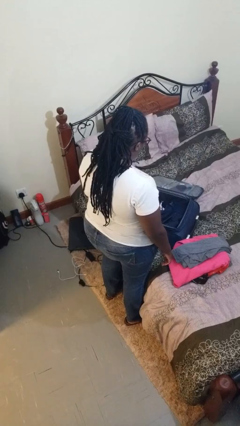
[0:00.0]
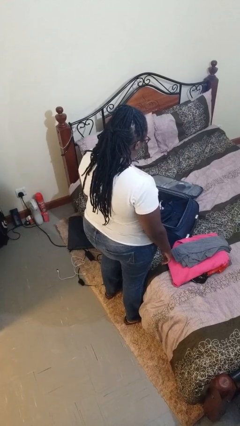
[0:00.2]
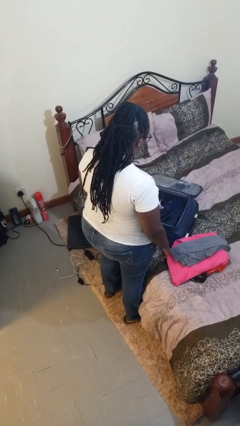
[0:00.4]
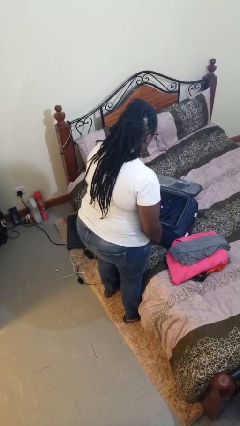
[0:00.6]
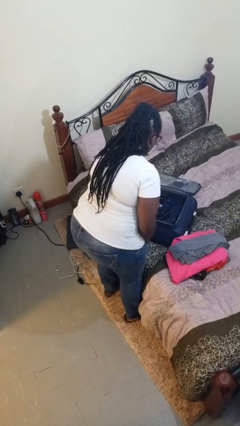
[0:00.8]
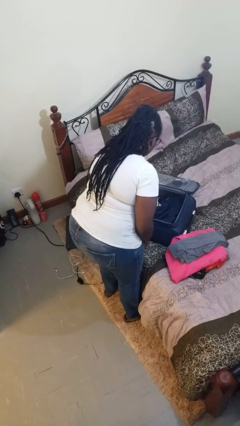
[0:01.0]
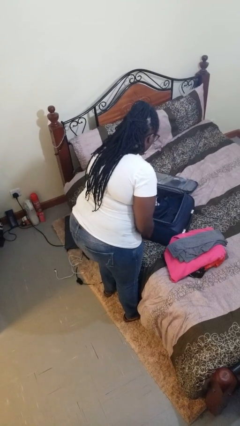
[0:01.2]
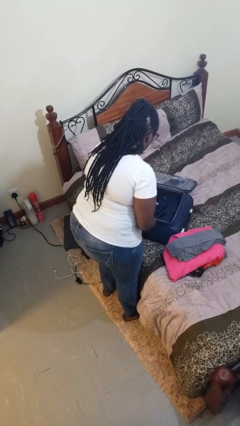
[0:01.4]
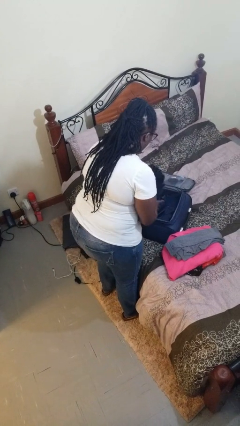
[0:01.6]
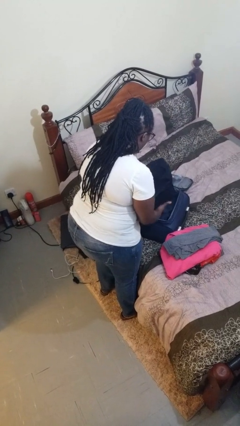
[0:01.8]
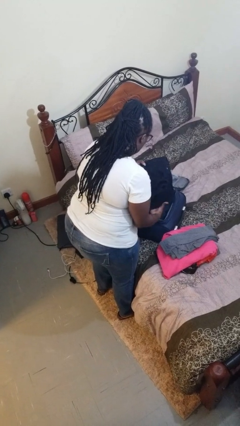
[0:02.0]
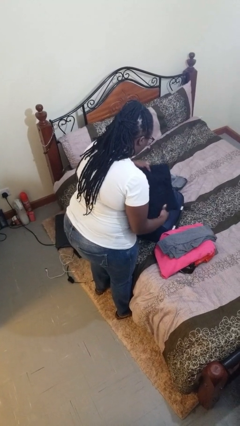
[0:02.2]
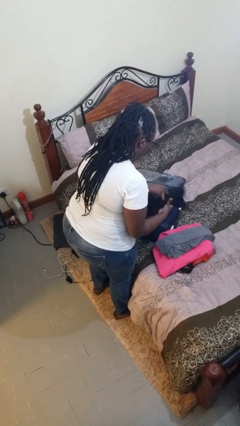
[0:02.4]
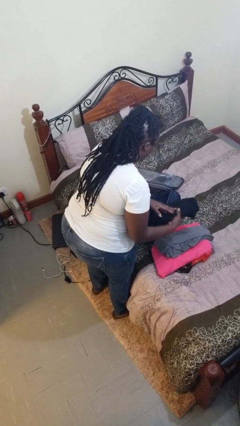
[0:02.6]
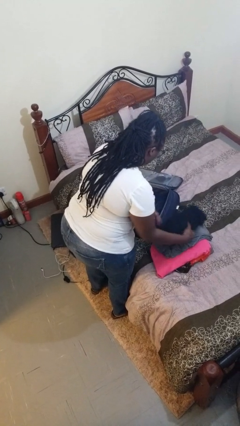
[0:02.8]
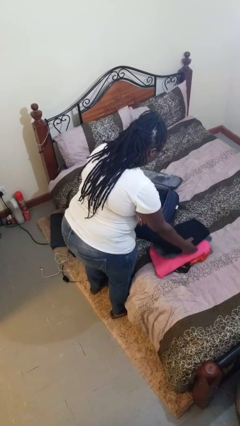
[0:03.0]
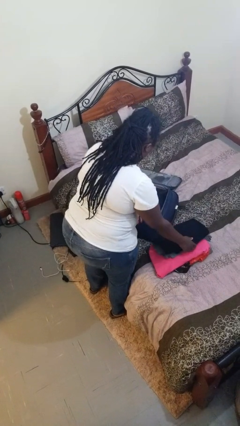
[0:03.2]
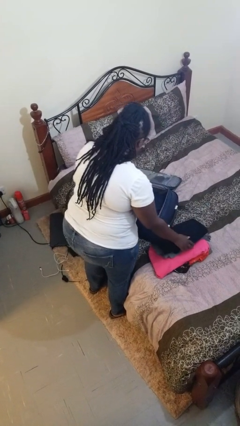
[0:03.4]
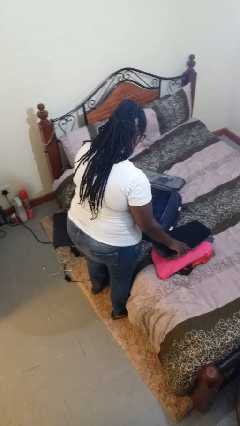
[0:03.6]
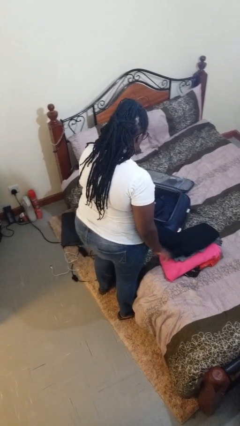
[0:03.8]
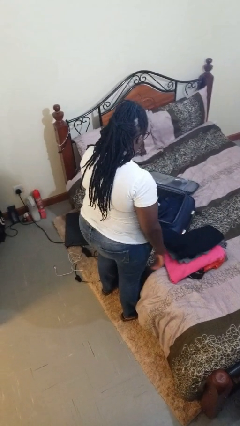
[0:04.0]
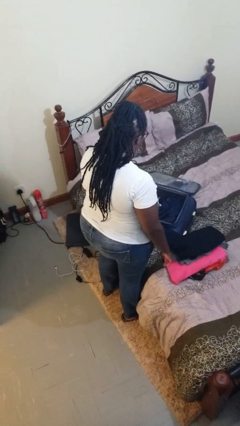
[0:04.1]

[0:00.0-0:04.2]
person unloads clothes from suitcase

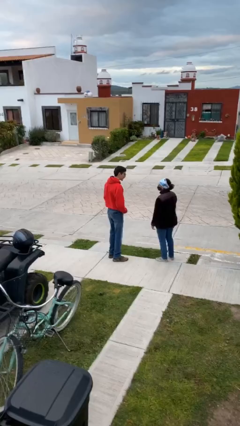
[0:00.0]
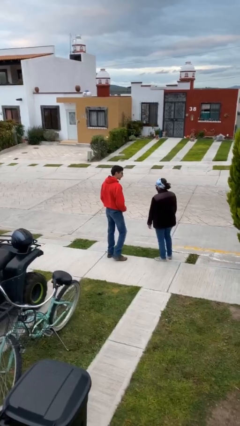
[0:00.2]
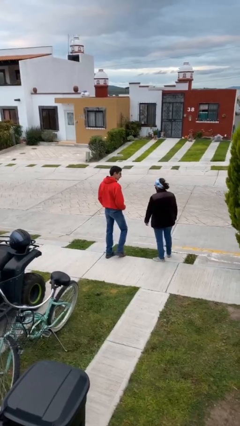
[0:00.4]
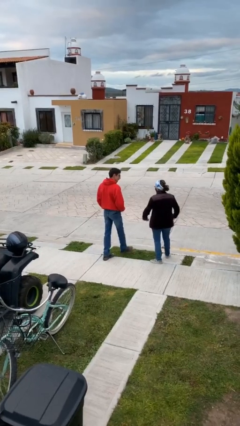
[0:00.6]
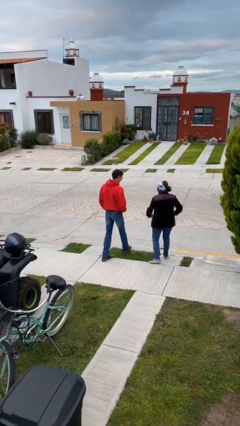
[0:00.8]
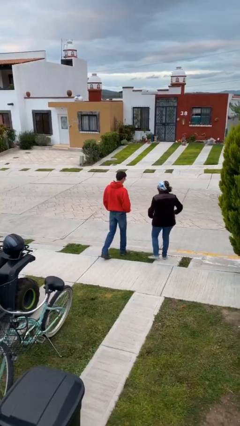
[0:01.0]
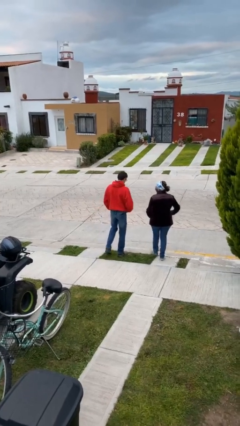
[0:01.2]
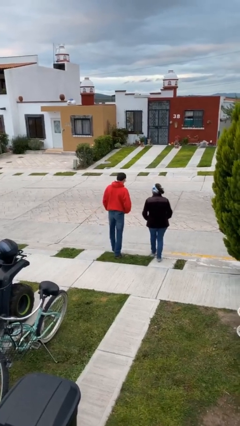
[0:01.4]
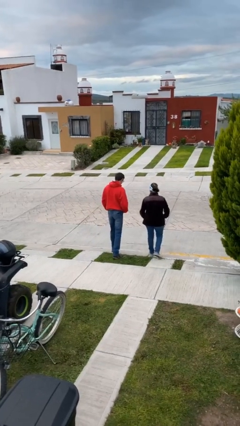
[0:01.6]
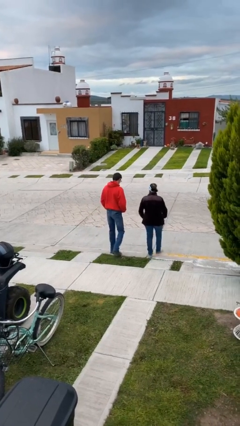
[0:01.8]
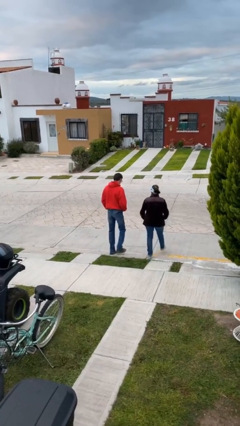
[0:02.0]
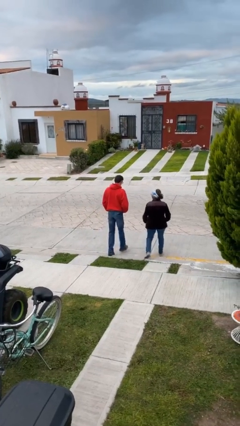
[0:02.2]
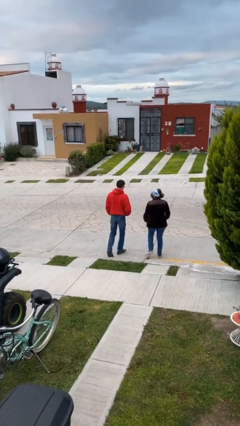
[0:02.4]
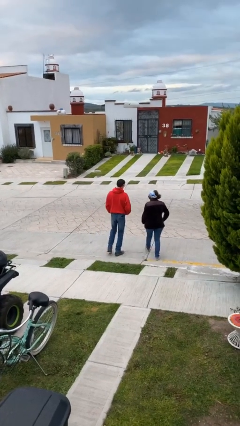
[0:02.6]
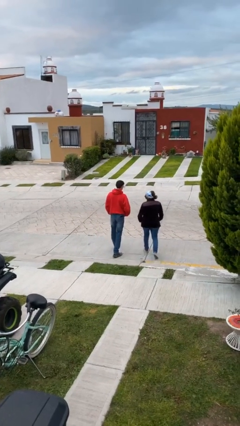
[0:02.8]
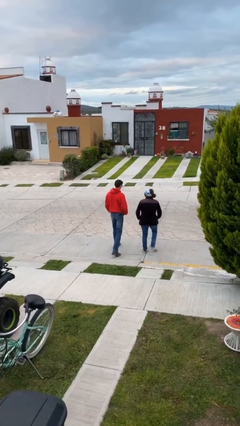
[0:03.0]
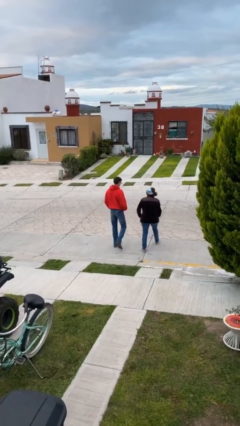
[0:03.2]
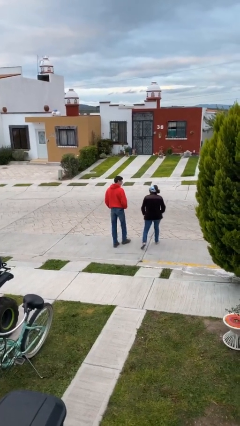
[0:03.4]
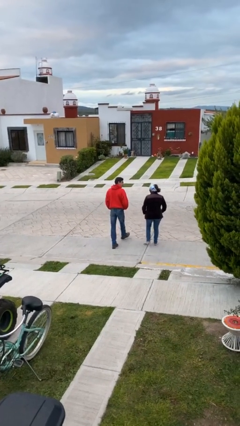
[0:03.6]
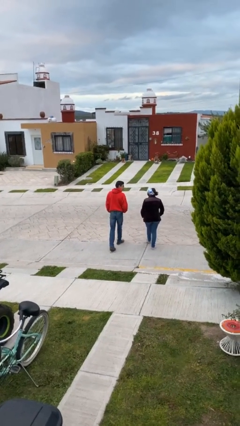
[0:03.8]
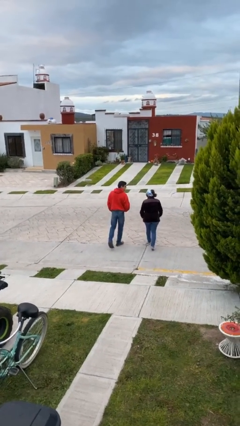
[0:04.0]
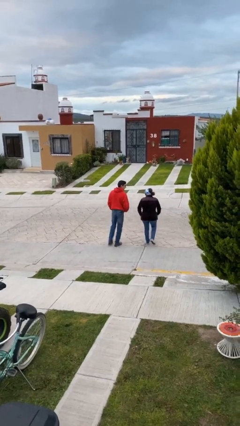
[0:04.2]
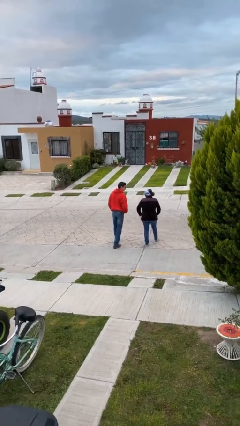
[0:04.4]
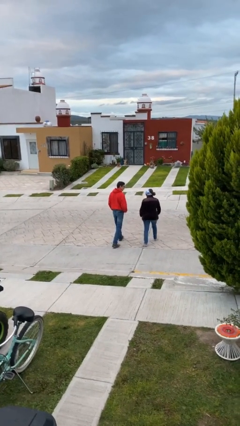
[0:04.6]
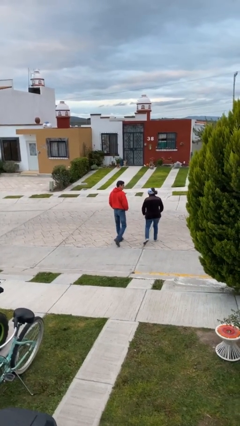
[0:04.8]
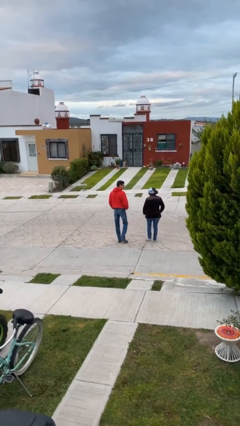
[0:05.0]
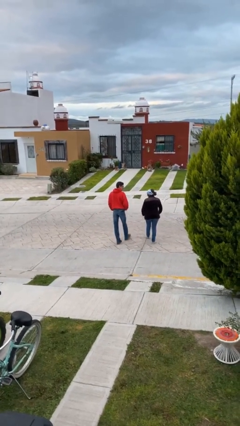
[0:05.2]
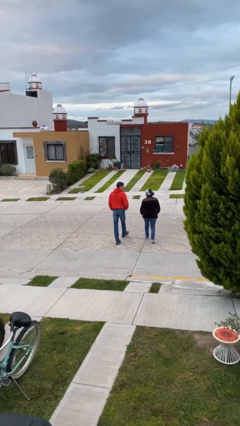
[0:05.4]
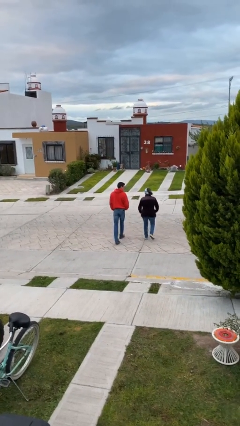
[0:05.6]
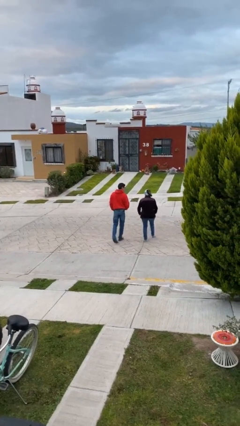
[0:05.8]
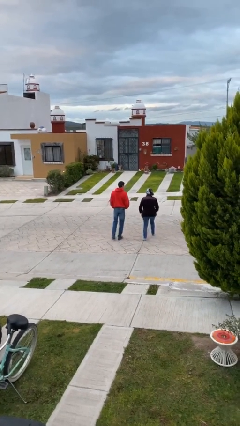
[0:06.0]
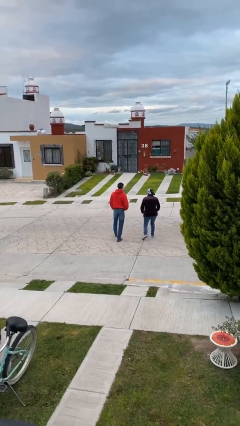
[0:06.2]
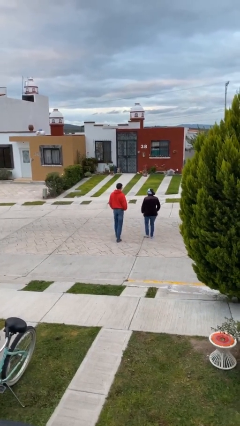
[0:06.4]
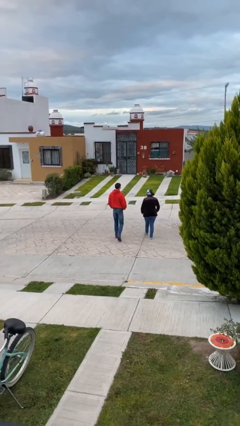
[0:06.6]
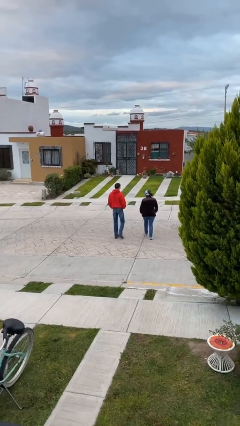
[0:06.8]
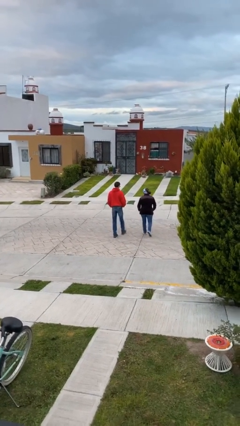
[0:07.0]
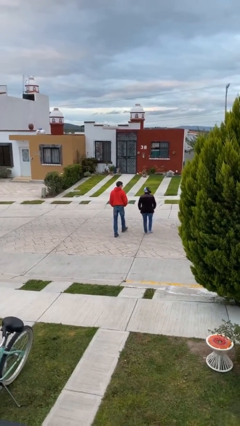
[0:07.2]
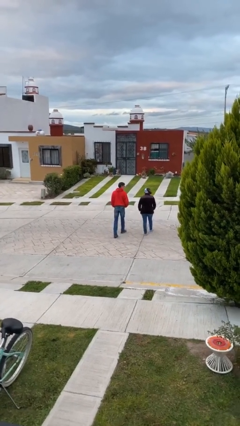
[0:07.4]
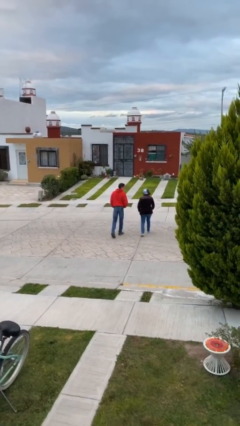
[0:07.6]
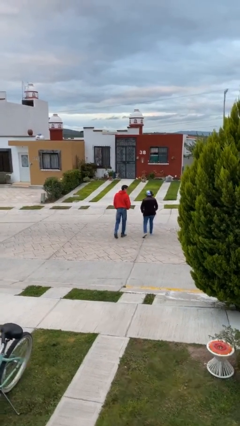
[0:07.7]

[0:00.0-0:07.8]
person talks to person

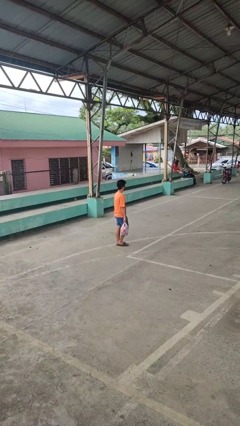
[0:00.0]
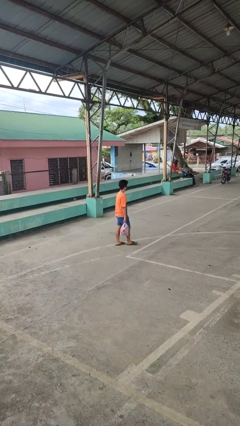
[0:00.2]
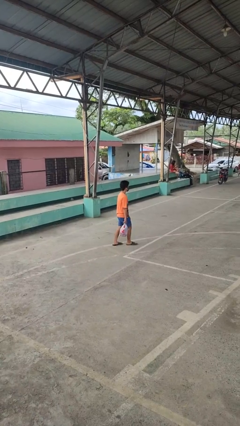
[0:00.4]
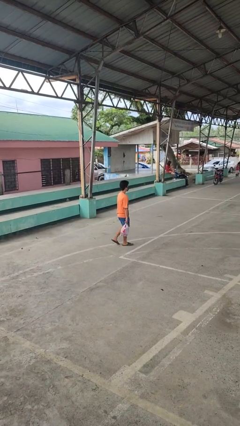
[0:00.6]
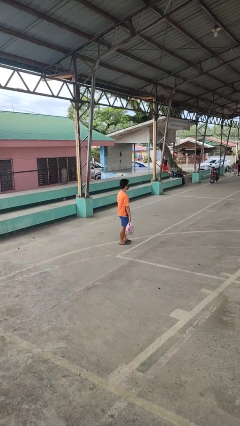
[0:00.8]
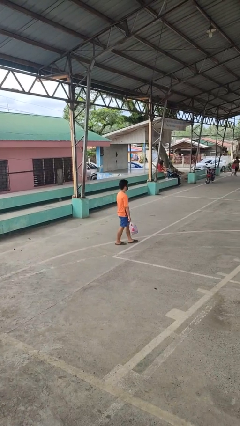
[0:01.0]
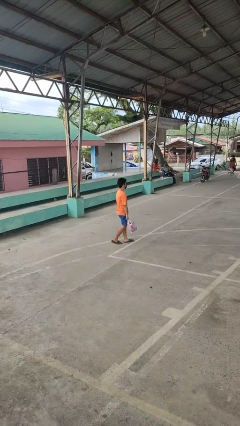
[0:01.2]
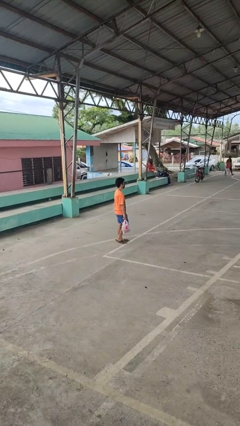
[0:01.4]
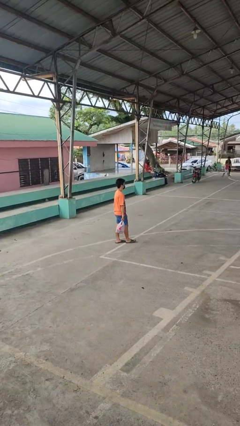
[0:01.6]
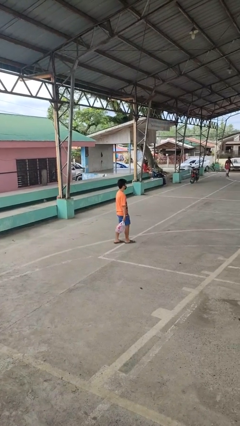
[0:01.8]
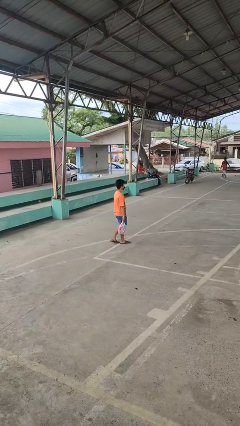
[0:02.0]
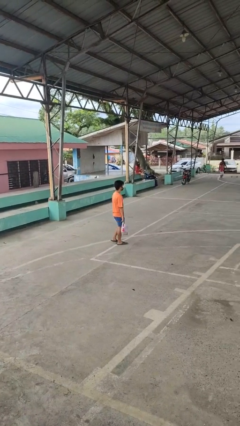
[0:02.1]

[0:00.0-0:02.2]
person carries groceries

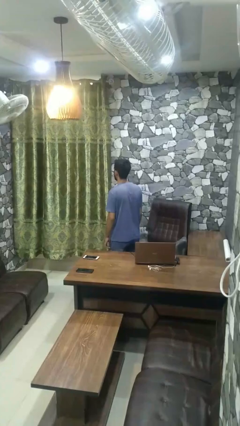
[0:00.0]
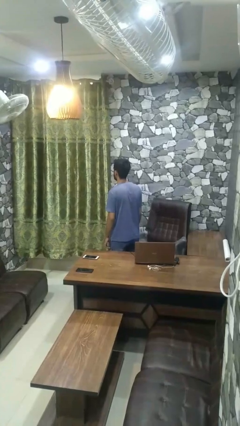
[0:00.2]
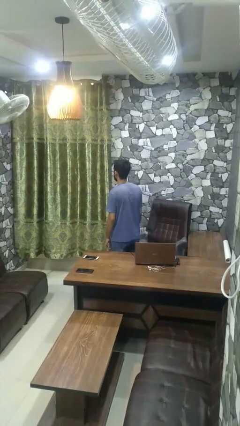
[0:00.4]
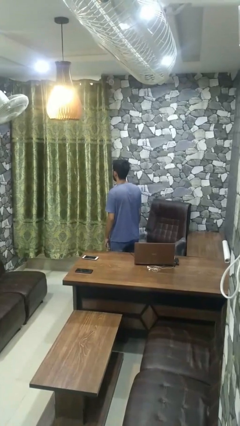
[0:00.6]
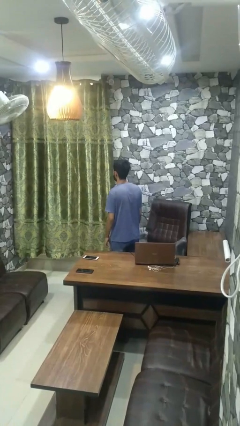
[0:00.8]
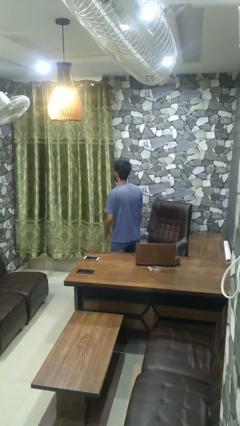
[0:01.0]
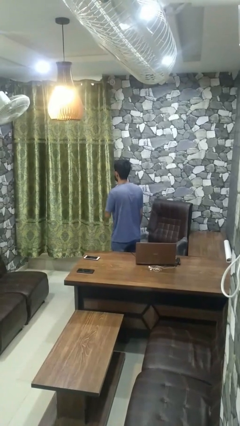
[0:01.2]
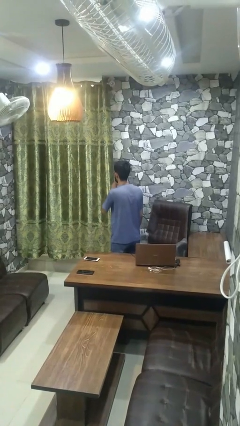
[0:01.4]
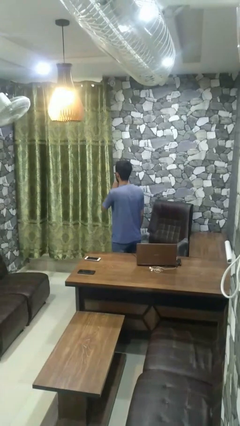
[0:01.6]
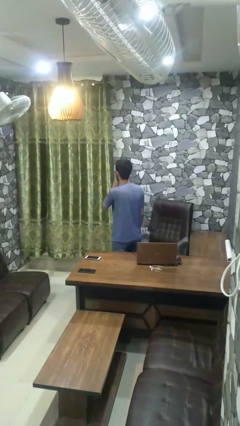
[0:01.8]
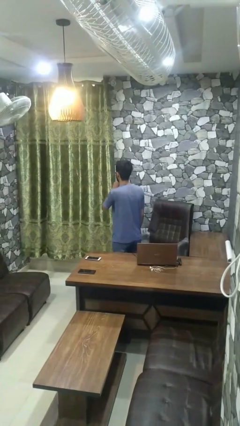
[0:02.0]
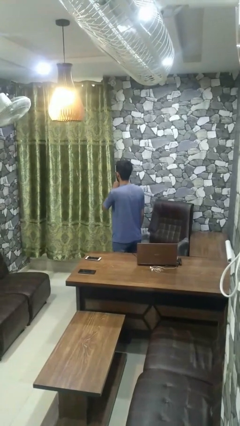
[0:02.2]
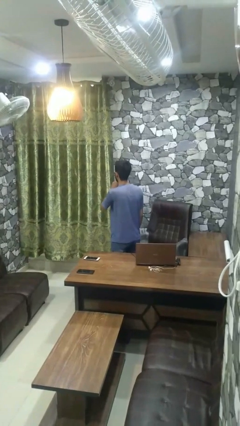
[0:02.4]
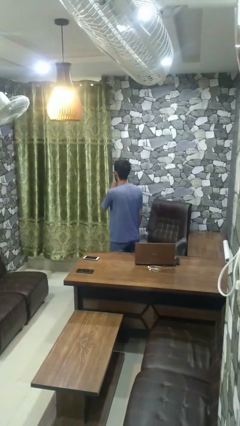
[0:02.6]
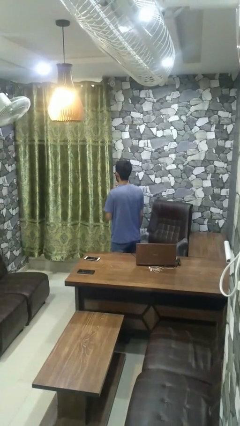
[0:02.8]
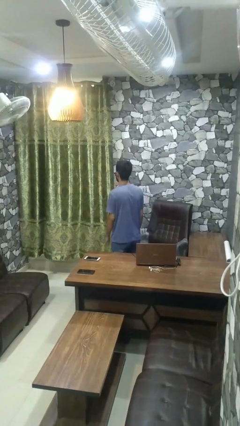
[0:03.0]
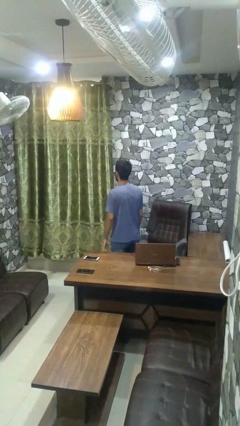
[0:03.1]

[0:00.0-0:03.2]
person gestures be quiet

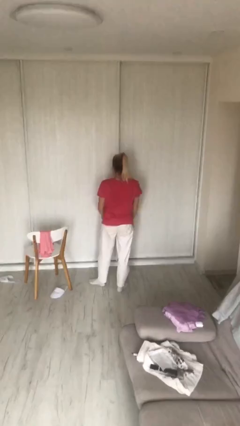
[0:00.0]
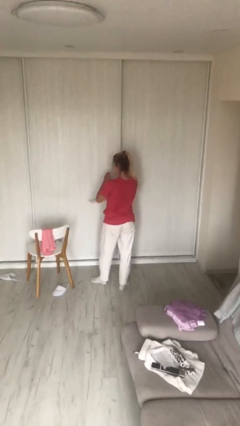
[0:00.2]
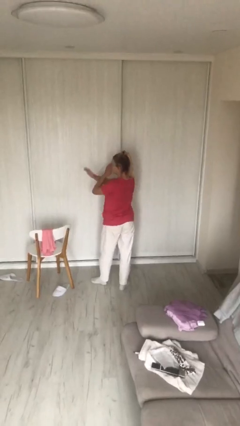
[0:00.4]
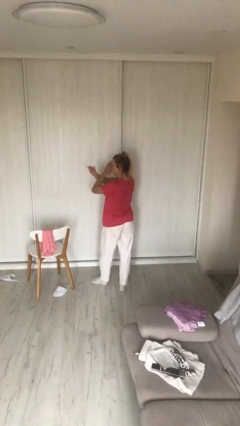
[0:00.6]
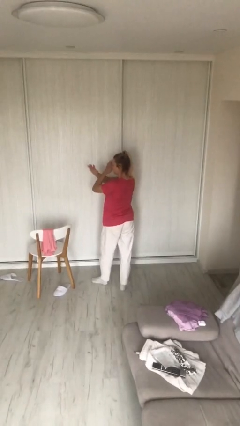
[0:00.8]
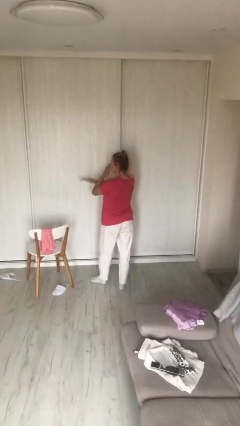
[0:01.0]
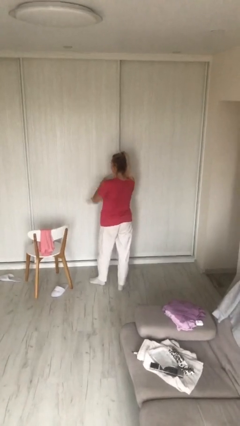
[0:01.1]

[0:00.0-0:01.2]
person gestures arms x
